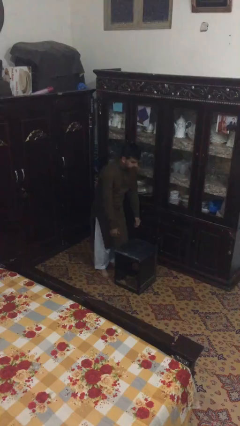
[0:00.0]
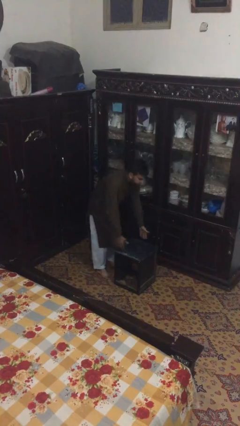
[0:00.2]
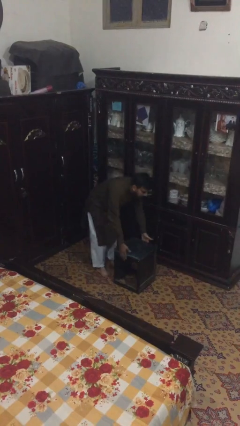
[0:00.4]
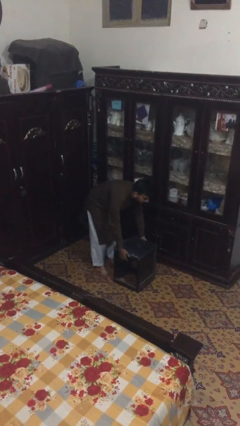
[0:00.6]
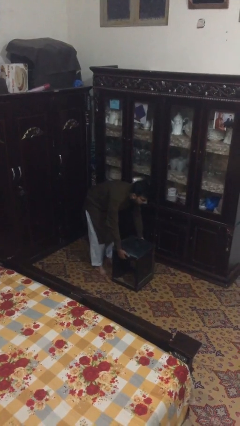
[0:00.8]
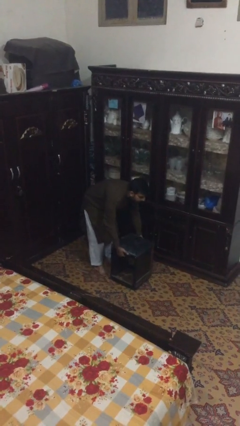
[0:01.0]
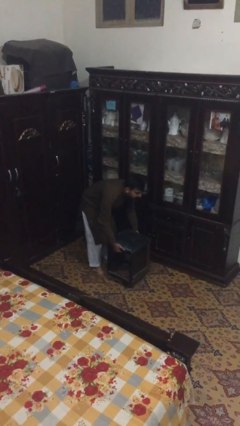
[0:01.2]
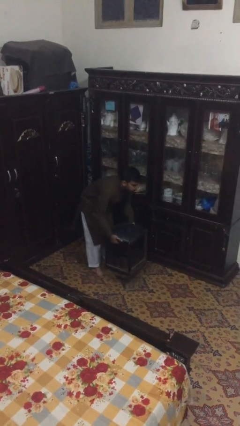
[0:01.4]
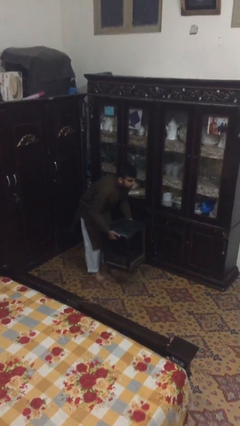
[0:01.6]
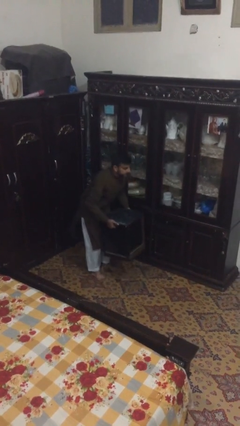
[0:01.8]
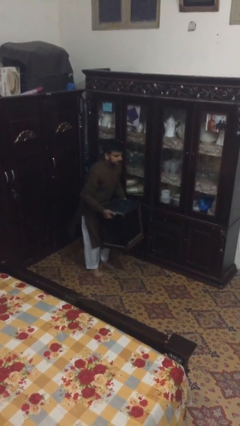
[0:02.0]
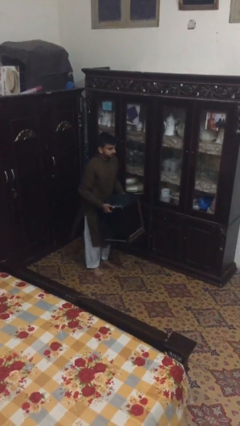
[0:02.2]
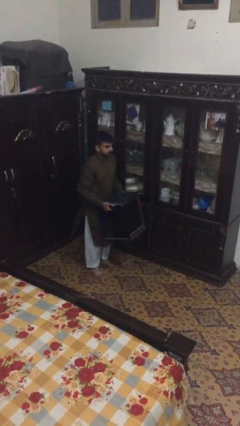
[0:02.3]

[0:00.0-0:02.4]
person picks up object from floor

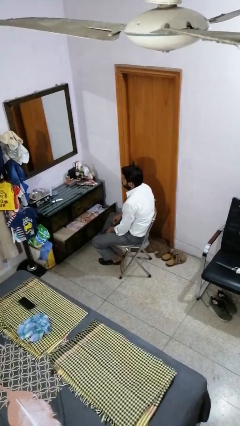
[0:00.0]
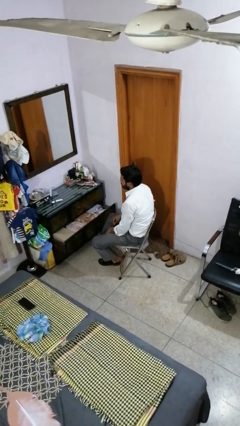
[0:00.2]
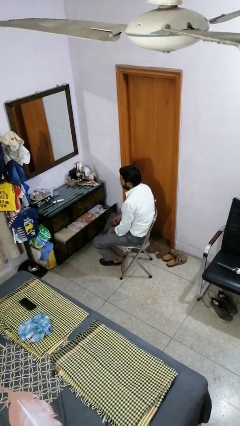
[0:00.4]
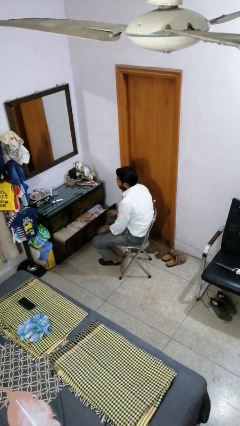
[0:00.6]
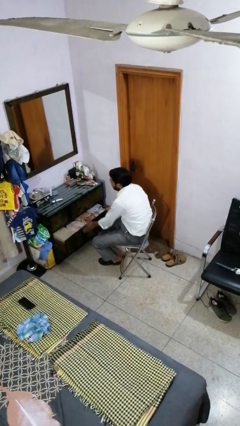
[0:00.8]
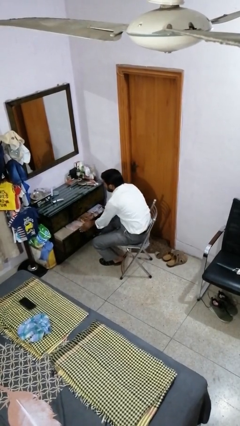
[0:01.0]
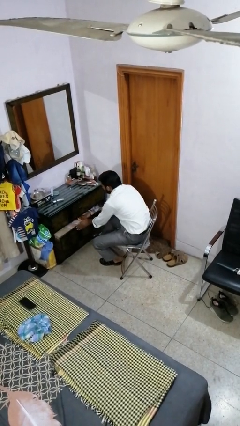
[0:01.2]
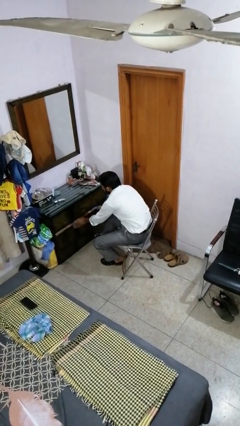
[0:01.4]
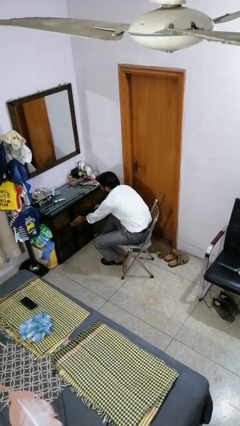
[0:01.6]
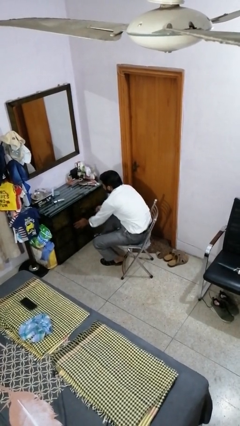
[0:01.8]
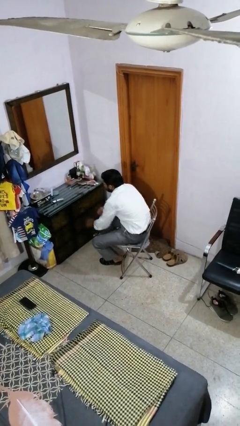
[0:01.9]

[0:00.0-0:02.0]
person closes dresser drawer

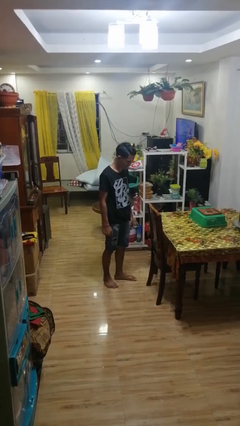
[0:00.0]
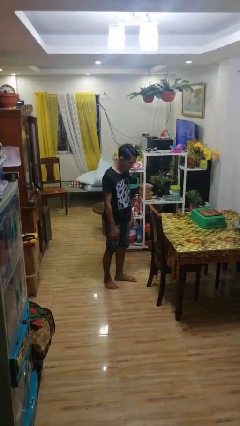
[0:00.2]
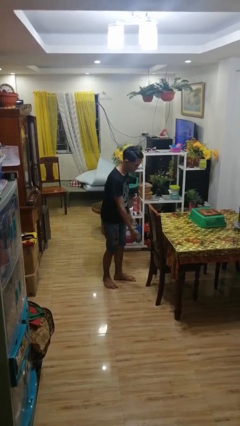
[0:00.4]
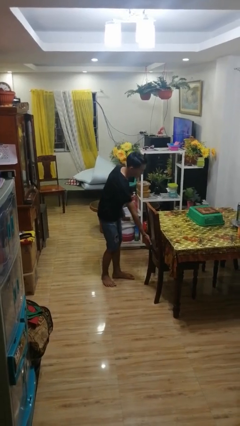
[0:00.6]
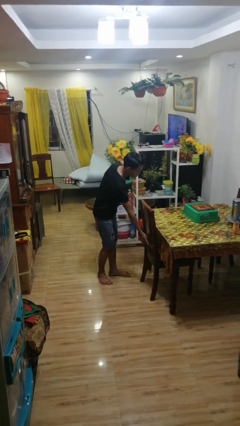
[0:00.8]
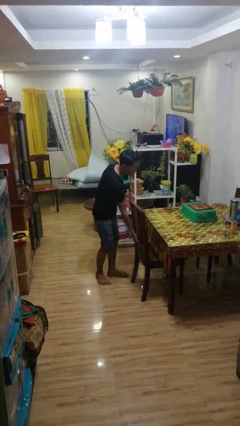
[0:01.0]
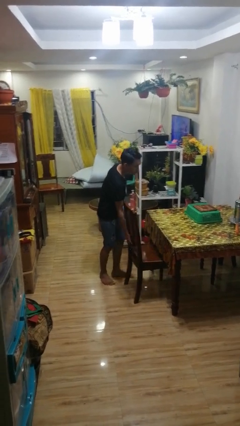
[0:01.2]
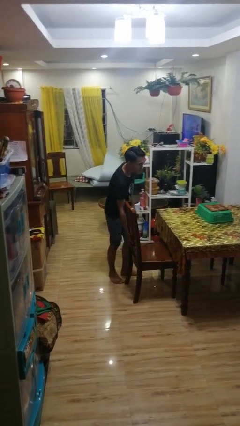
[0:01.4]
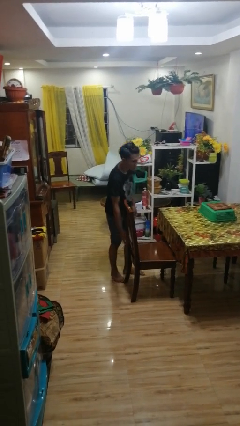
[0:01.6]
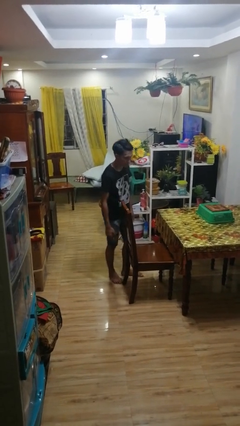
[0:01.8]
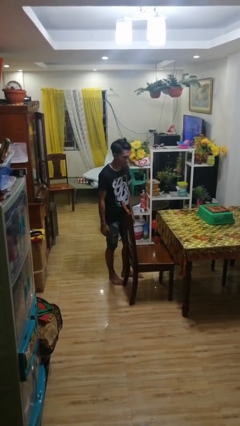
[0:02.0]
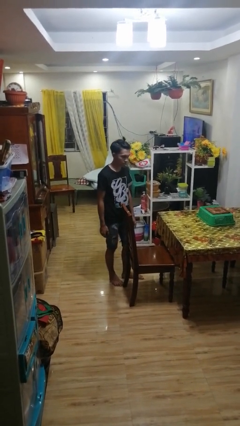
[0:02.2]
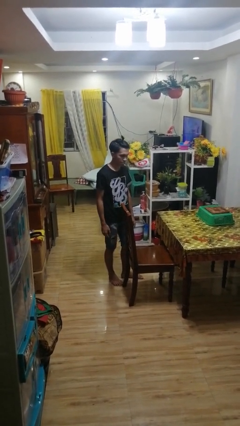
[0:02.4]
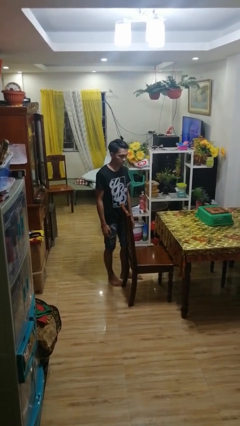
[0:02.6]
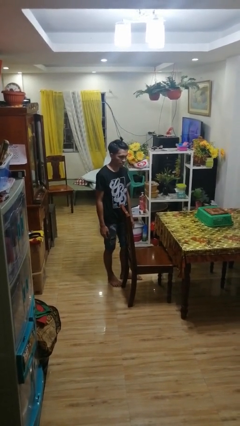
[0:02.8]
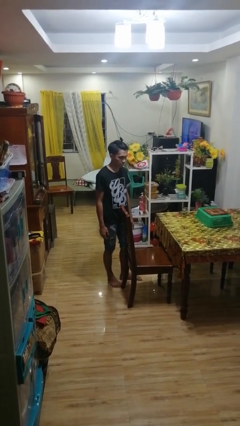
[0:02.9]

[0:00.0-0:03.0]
person pulls out chair

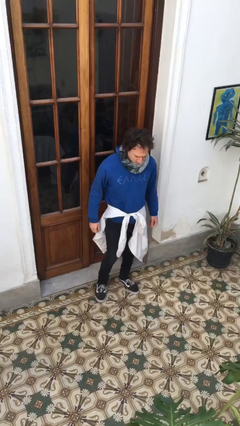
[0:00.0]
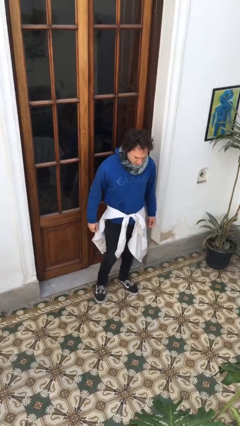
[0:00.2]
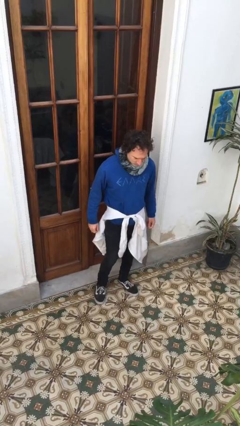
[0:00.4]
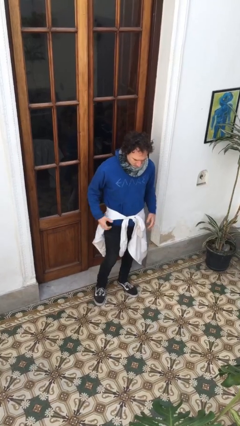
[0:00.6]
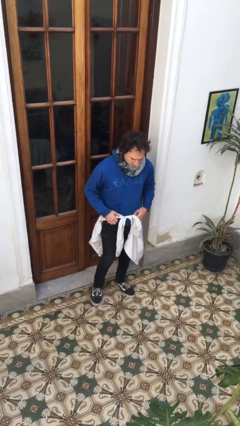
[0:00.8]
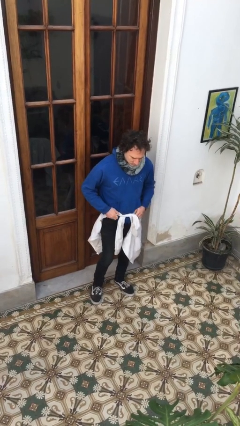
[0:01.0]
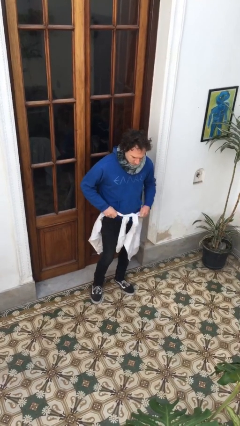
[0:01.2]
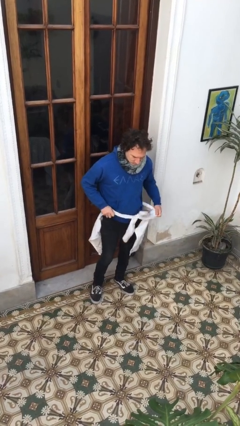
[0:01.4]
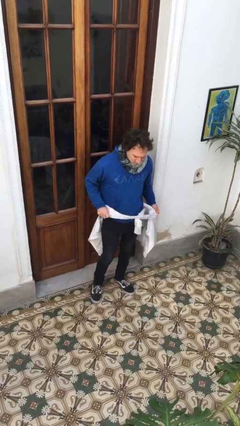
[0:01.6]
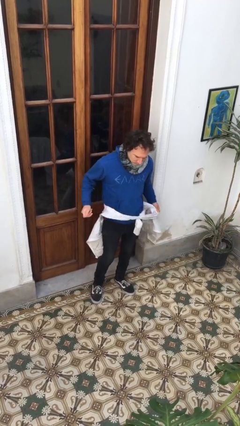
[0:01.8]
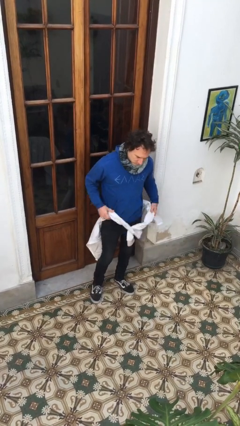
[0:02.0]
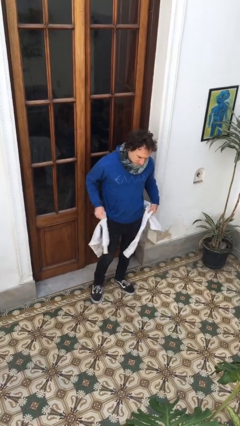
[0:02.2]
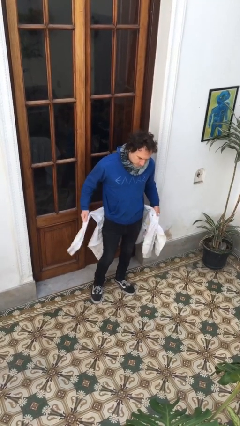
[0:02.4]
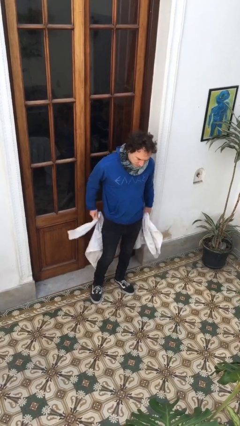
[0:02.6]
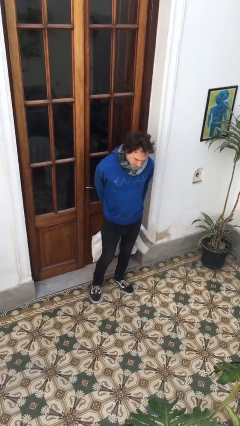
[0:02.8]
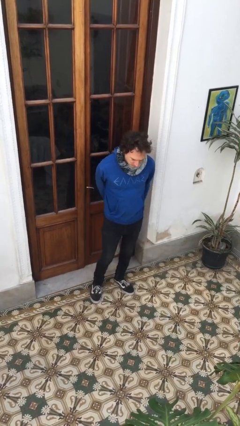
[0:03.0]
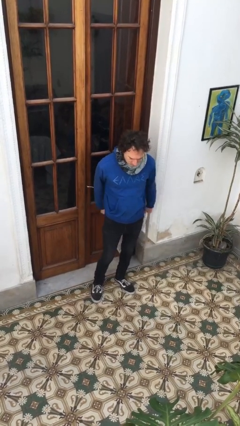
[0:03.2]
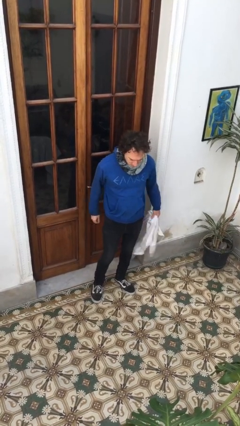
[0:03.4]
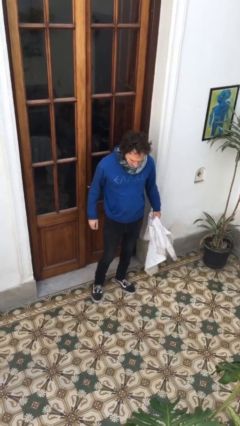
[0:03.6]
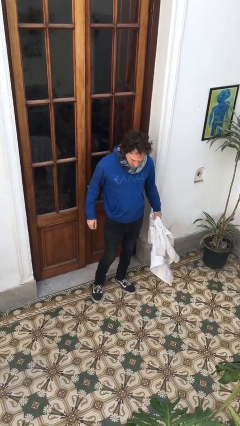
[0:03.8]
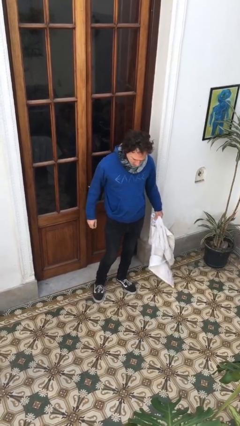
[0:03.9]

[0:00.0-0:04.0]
person unties jacket around waist

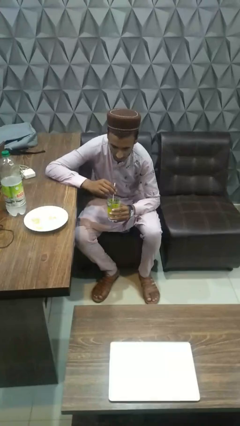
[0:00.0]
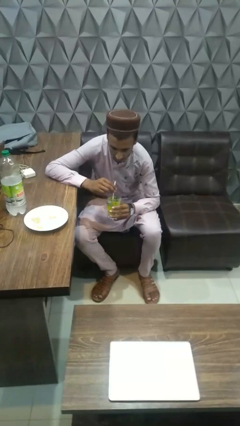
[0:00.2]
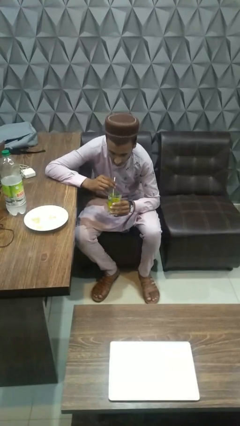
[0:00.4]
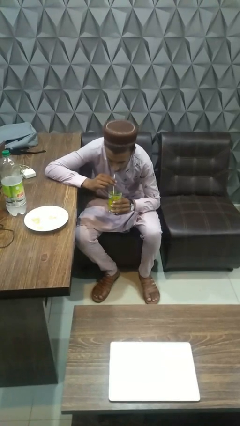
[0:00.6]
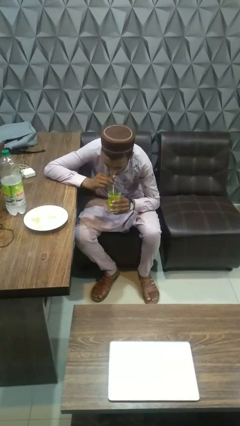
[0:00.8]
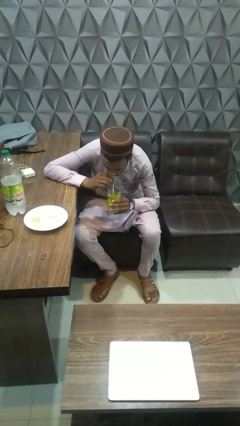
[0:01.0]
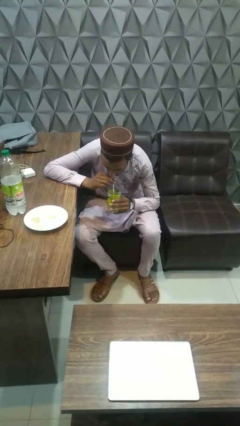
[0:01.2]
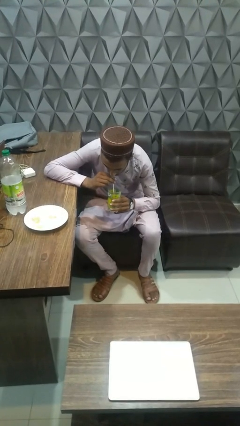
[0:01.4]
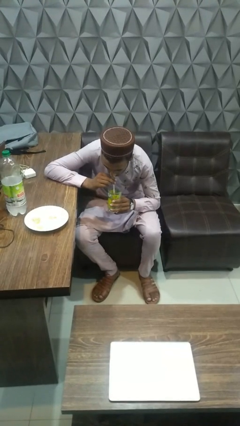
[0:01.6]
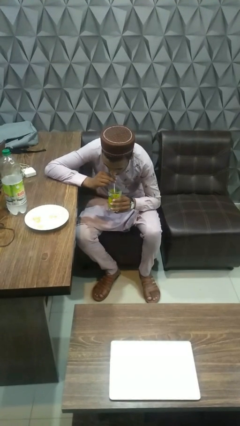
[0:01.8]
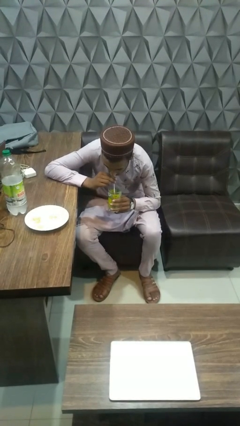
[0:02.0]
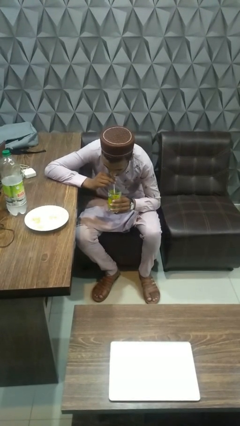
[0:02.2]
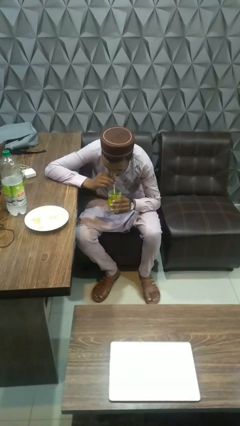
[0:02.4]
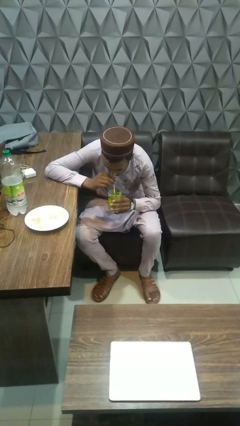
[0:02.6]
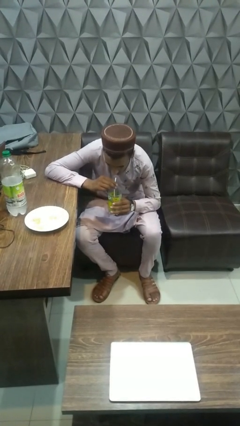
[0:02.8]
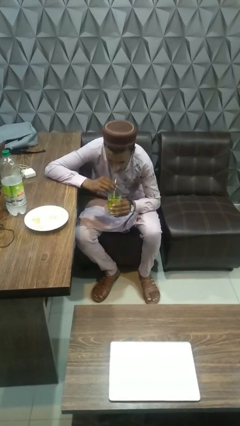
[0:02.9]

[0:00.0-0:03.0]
person drinks from straw

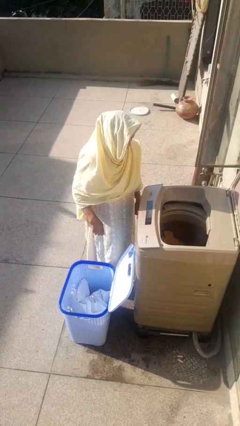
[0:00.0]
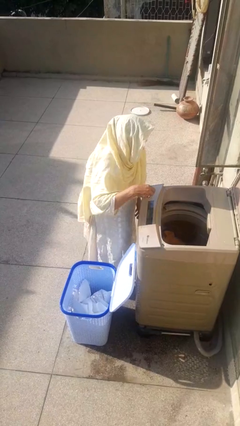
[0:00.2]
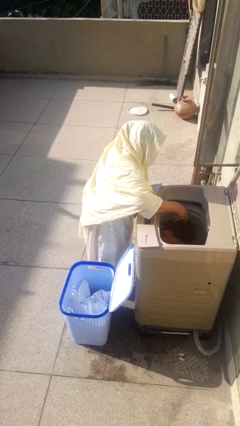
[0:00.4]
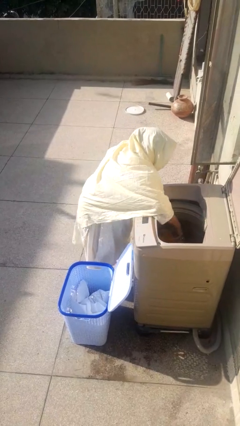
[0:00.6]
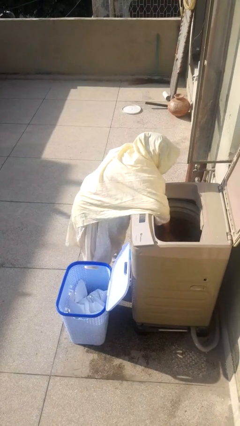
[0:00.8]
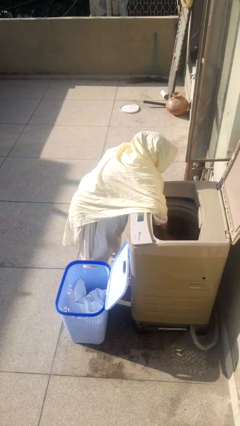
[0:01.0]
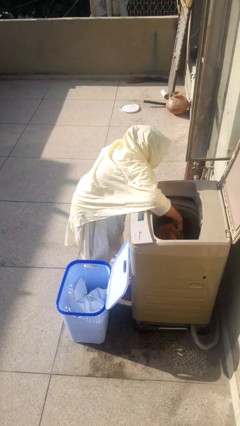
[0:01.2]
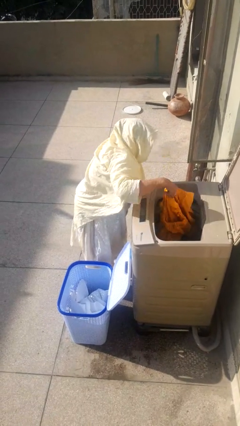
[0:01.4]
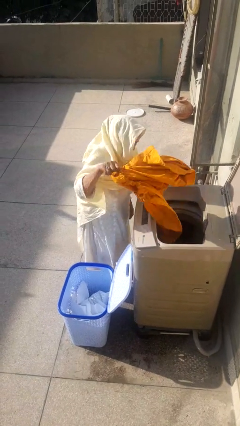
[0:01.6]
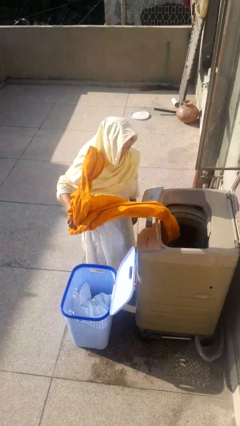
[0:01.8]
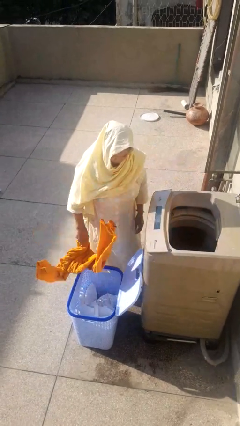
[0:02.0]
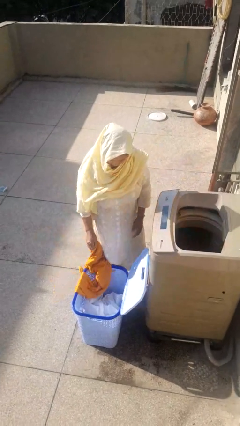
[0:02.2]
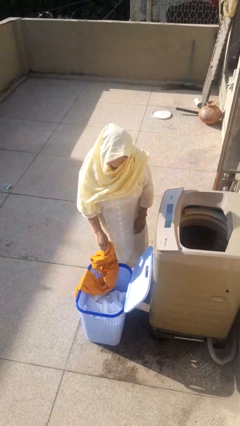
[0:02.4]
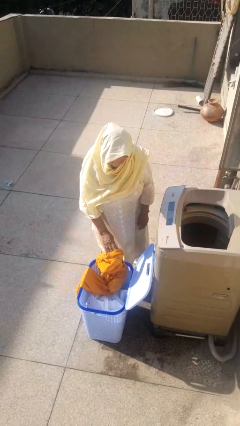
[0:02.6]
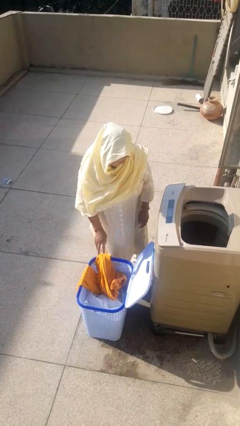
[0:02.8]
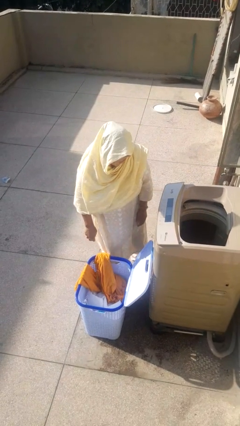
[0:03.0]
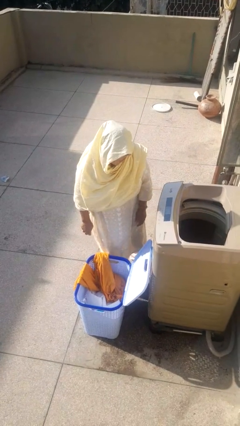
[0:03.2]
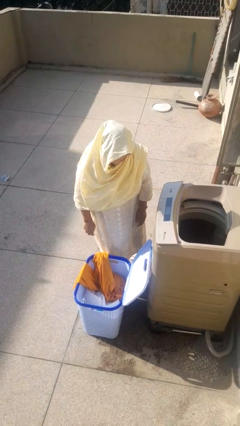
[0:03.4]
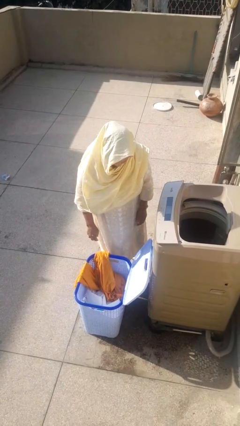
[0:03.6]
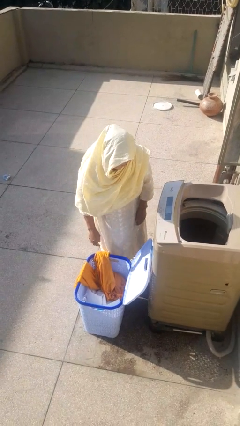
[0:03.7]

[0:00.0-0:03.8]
person unloads clotheswasher
